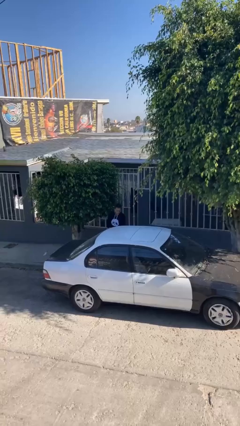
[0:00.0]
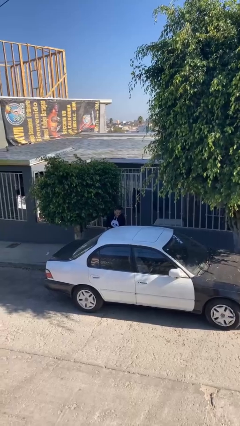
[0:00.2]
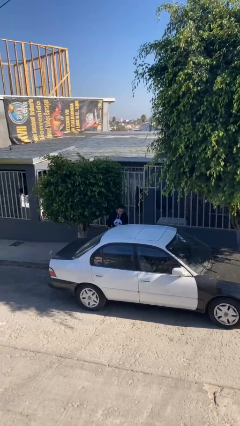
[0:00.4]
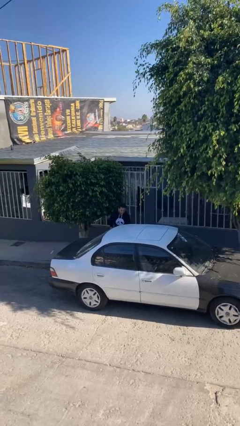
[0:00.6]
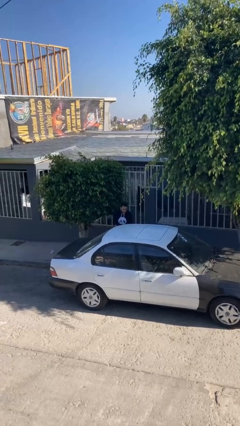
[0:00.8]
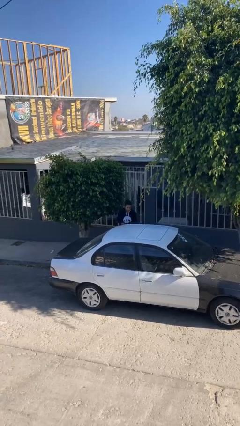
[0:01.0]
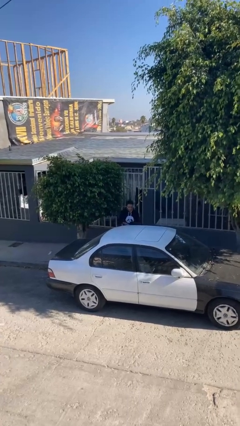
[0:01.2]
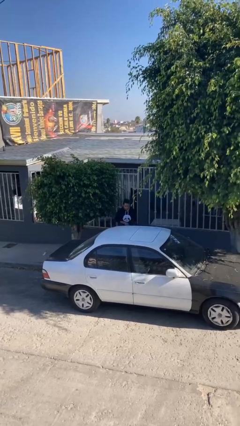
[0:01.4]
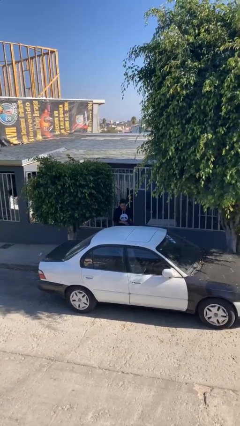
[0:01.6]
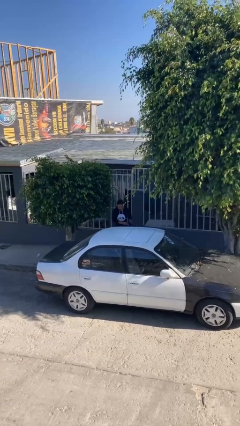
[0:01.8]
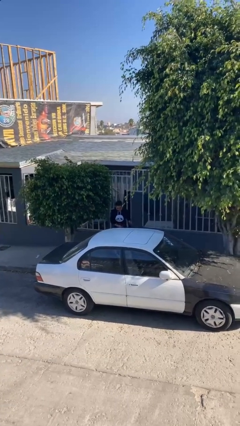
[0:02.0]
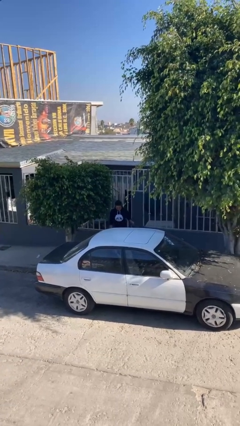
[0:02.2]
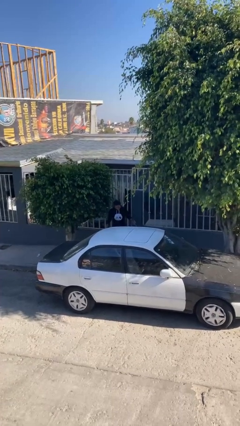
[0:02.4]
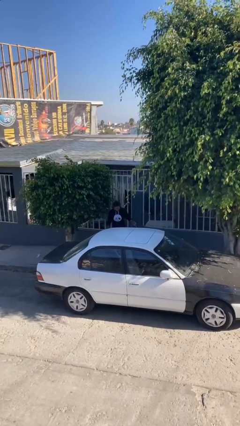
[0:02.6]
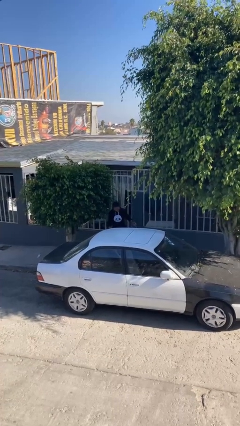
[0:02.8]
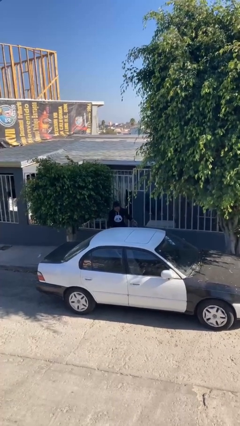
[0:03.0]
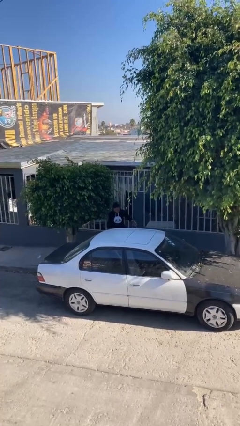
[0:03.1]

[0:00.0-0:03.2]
person opens car door

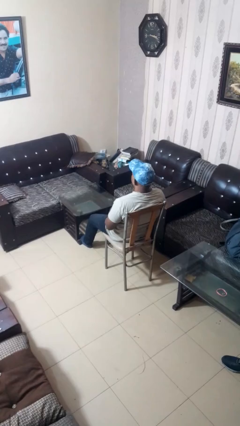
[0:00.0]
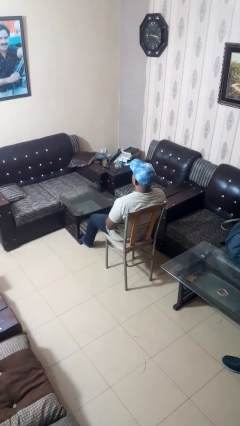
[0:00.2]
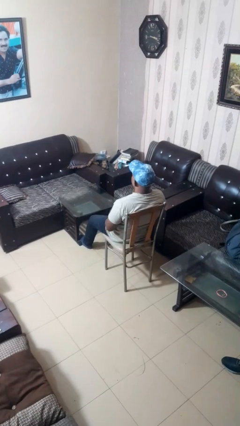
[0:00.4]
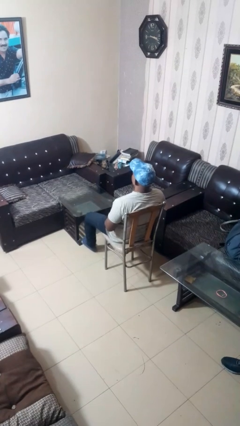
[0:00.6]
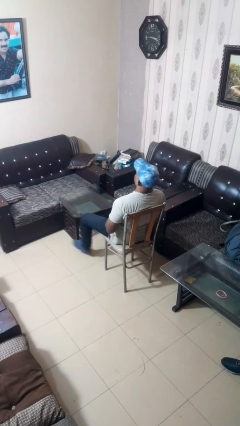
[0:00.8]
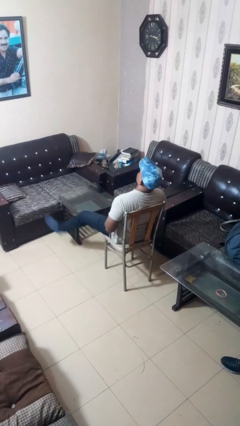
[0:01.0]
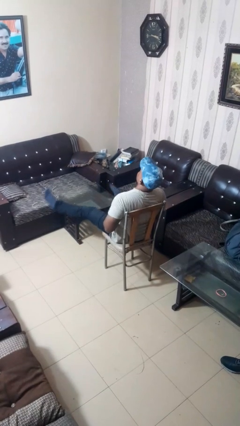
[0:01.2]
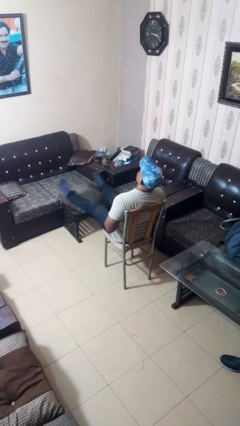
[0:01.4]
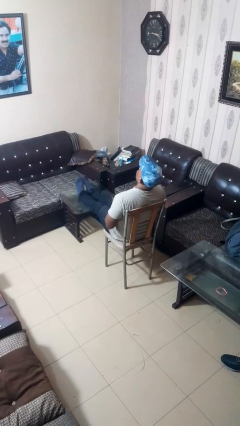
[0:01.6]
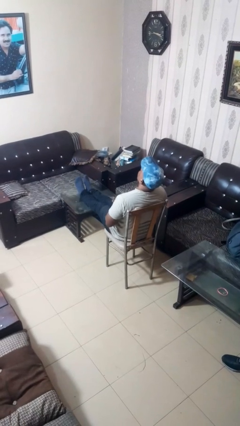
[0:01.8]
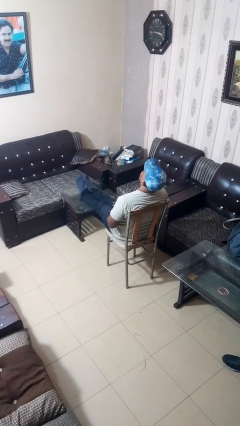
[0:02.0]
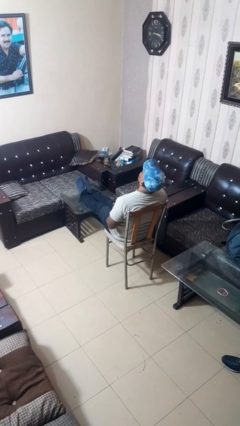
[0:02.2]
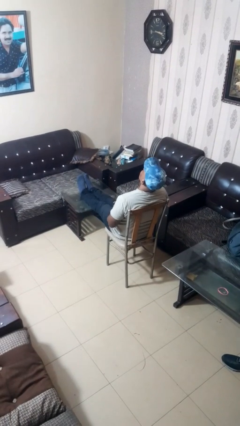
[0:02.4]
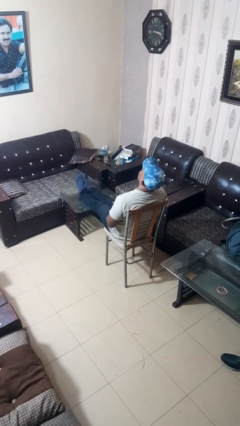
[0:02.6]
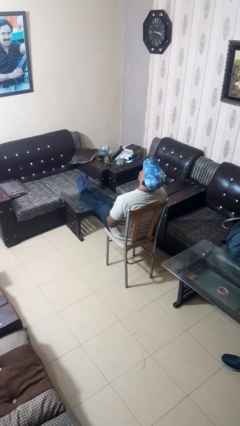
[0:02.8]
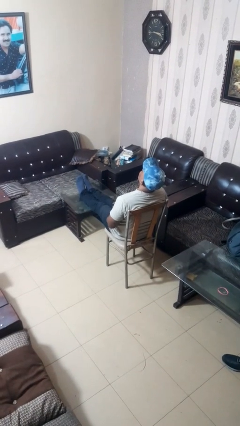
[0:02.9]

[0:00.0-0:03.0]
person puts feet up

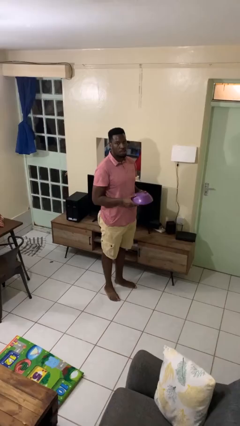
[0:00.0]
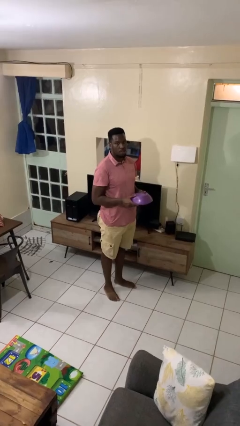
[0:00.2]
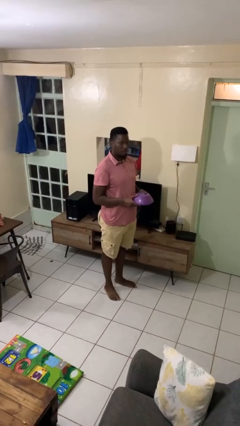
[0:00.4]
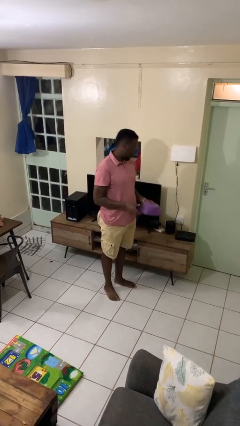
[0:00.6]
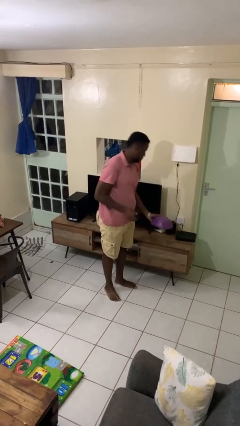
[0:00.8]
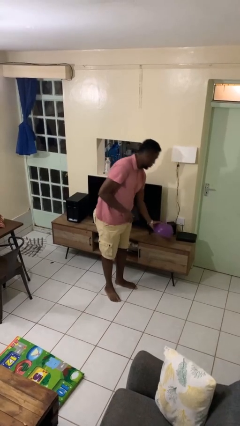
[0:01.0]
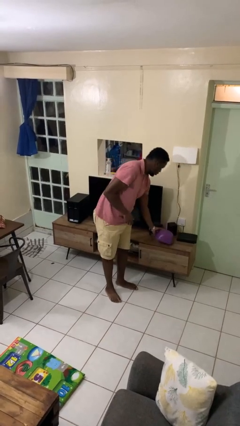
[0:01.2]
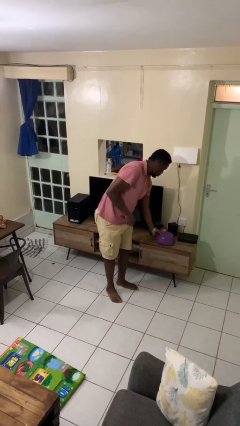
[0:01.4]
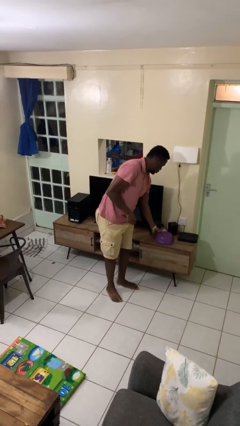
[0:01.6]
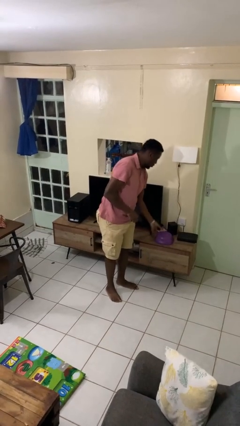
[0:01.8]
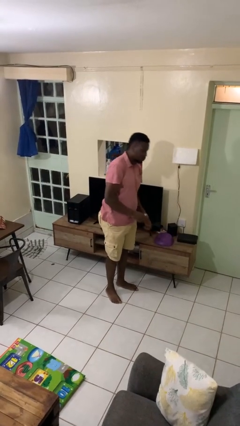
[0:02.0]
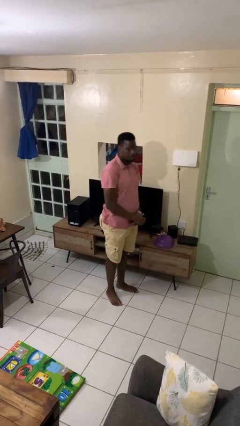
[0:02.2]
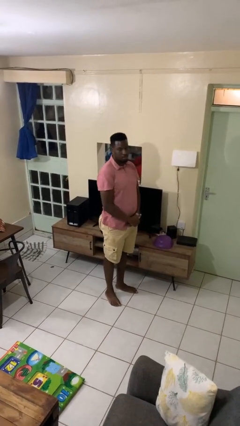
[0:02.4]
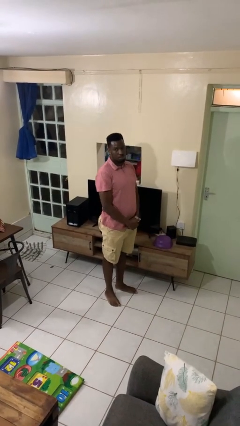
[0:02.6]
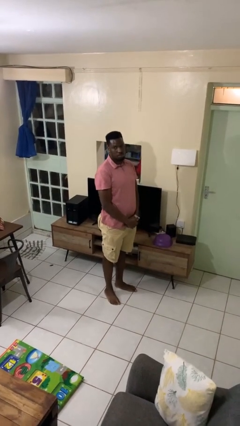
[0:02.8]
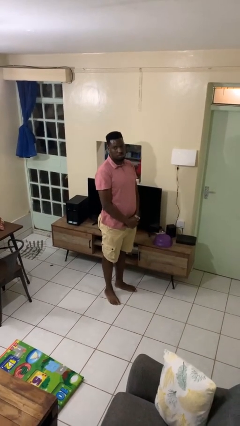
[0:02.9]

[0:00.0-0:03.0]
person puts down object on countertop

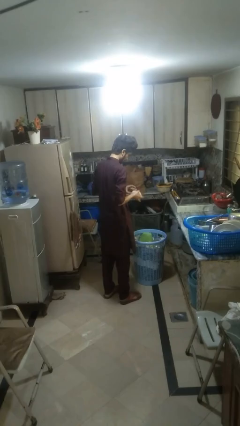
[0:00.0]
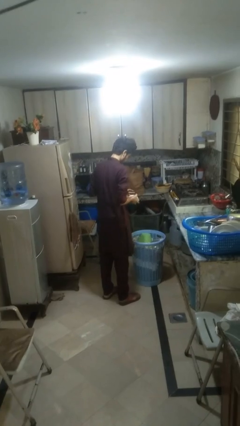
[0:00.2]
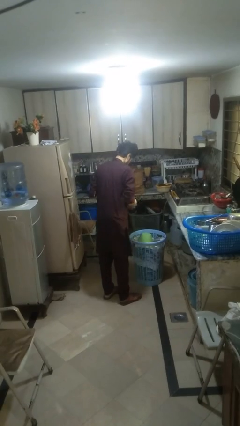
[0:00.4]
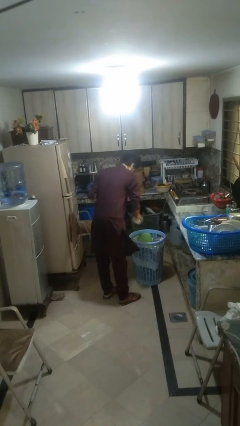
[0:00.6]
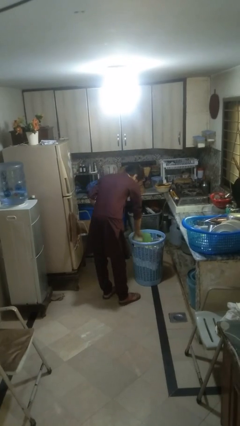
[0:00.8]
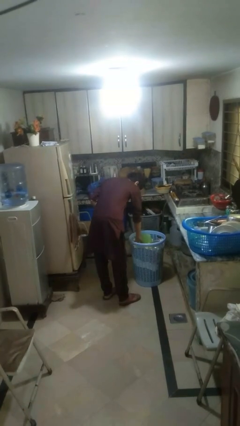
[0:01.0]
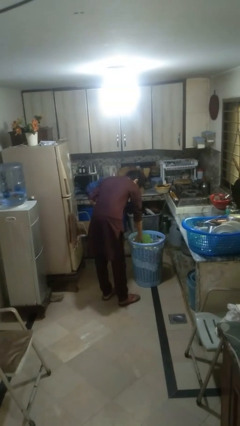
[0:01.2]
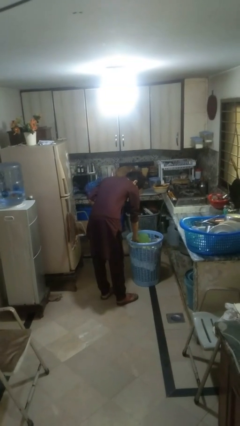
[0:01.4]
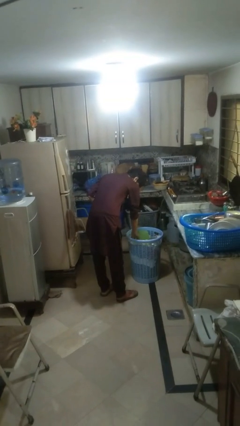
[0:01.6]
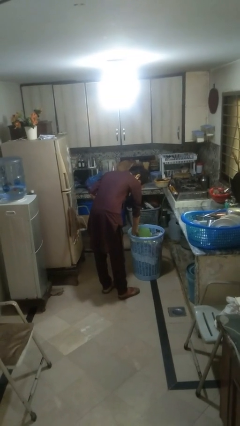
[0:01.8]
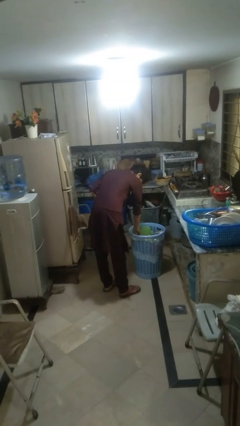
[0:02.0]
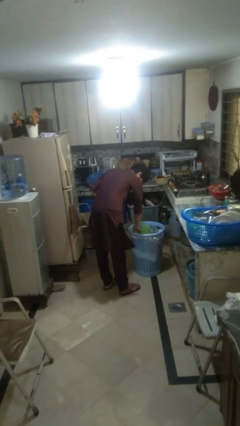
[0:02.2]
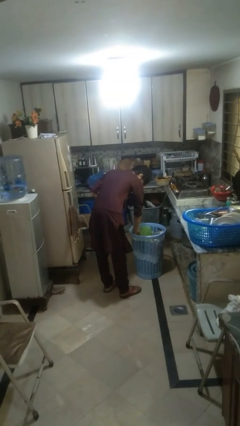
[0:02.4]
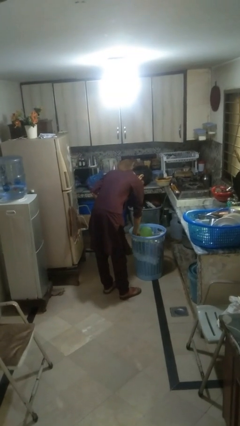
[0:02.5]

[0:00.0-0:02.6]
person puts object into basket

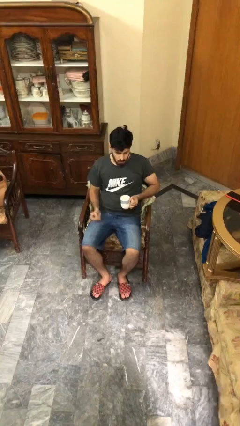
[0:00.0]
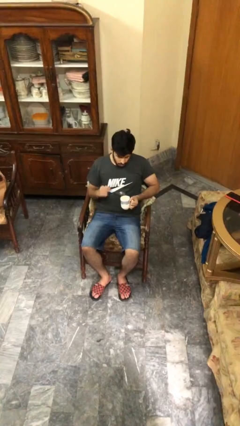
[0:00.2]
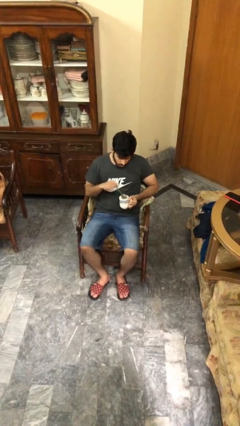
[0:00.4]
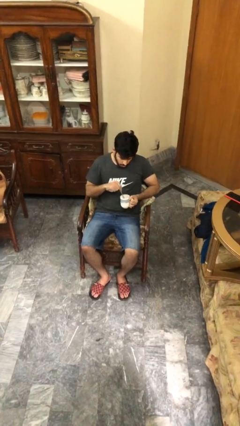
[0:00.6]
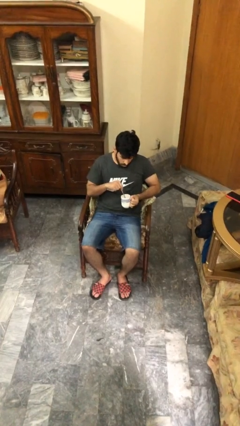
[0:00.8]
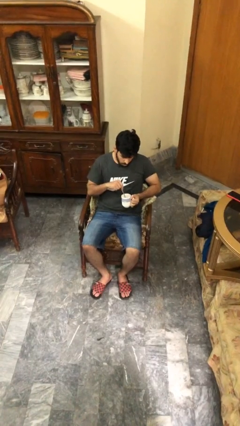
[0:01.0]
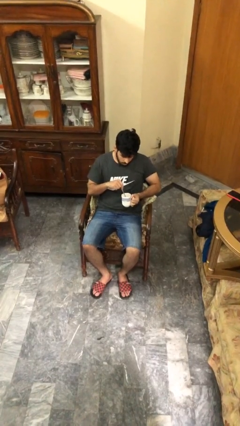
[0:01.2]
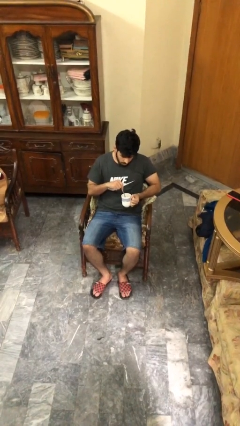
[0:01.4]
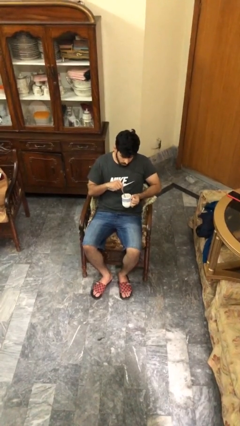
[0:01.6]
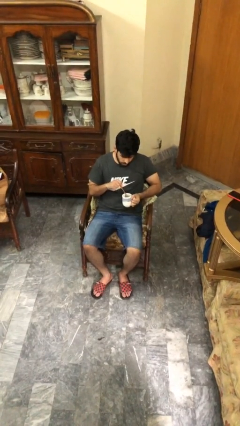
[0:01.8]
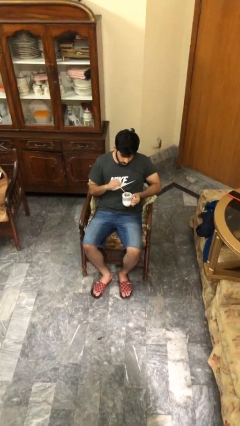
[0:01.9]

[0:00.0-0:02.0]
person stirs mug

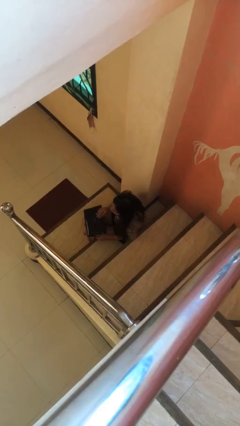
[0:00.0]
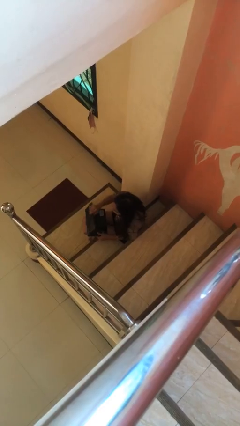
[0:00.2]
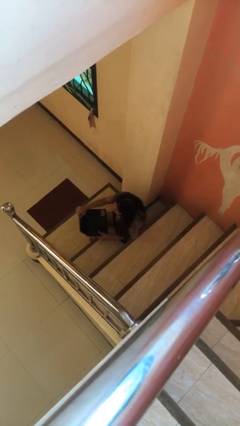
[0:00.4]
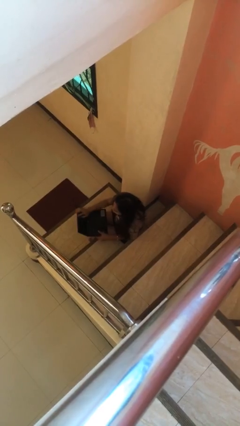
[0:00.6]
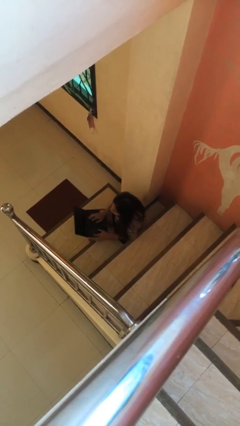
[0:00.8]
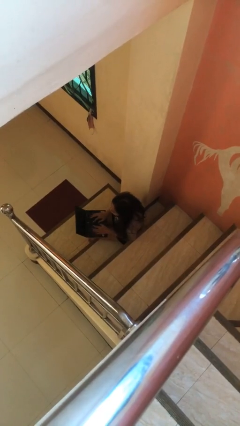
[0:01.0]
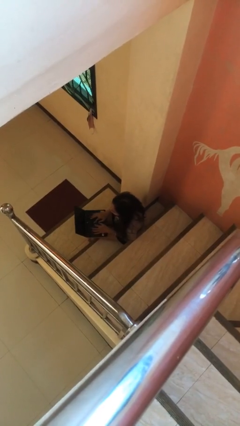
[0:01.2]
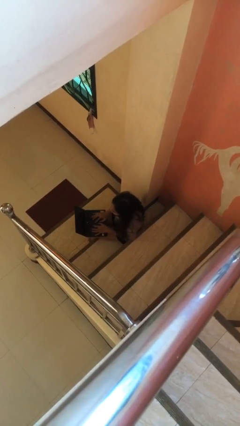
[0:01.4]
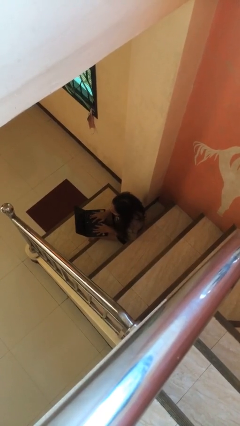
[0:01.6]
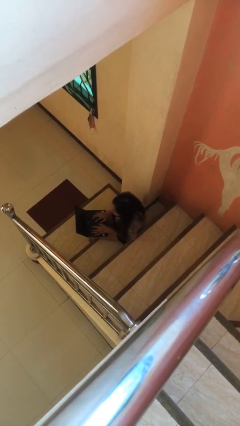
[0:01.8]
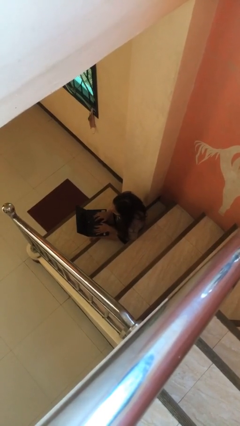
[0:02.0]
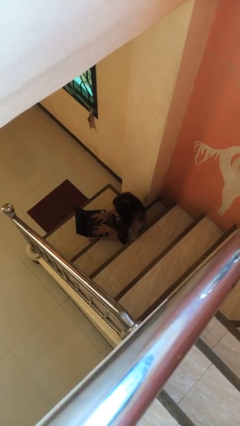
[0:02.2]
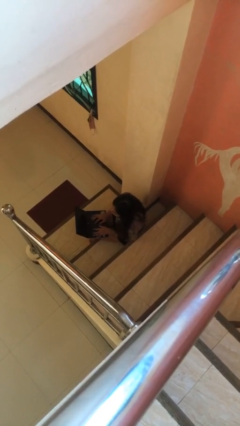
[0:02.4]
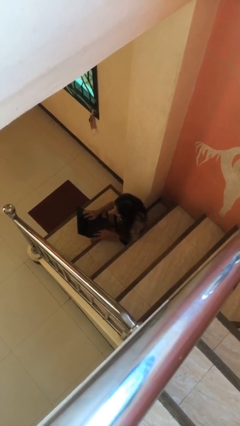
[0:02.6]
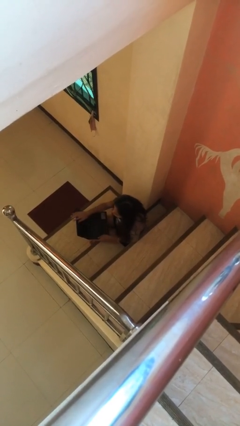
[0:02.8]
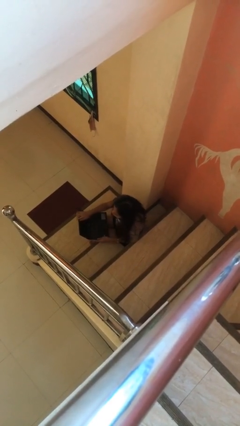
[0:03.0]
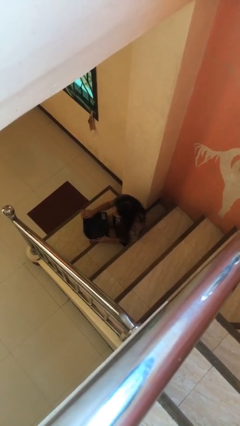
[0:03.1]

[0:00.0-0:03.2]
person interacts with laptop

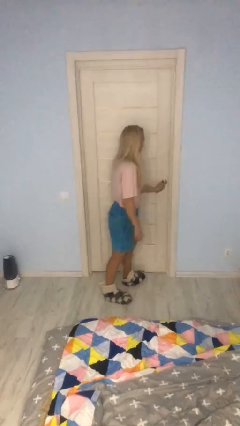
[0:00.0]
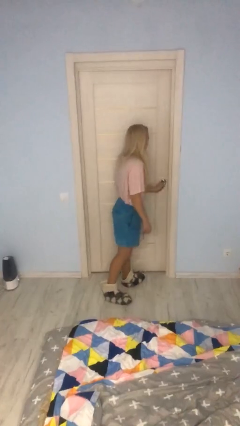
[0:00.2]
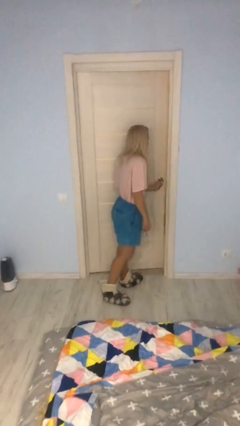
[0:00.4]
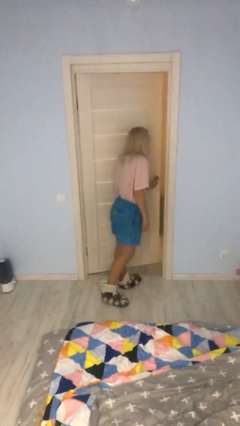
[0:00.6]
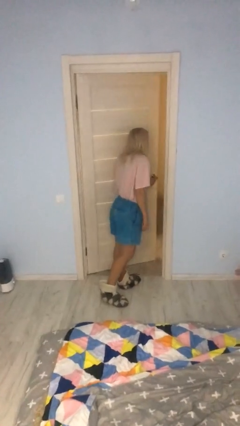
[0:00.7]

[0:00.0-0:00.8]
person opens facility door
